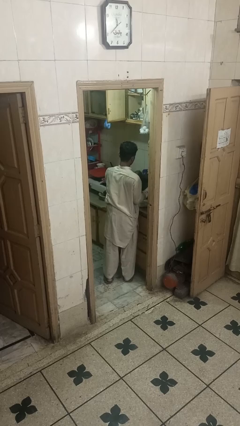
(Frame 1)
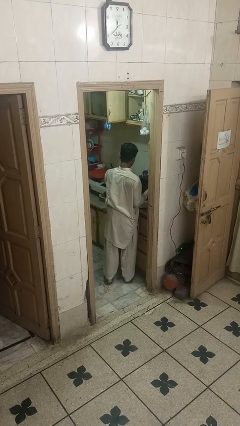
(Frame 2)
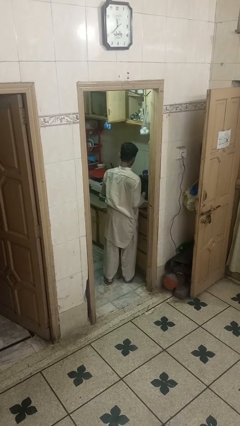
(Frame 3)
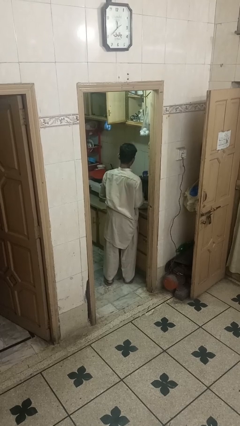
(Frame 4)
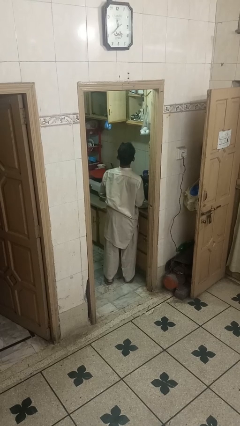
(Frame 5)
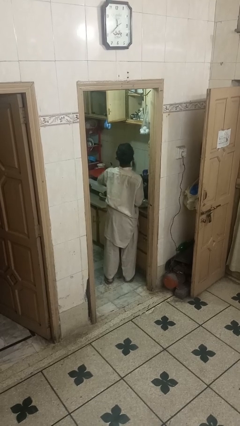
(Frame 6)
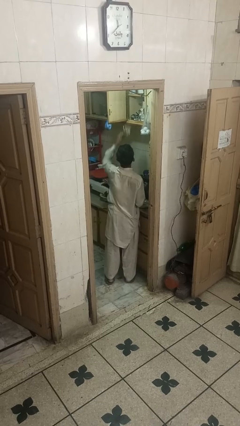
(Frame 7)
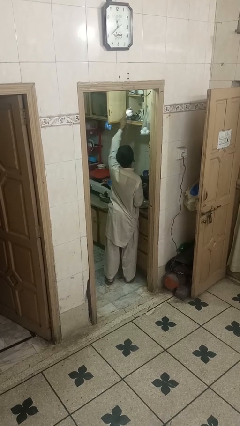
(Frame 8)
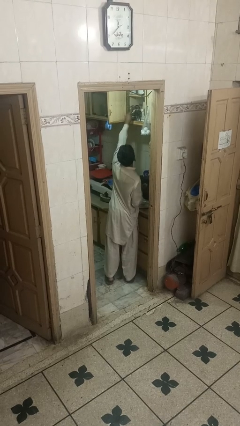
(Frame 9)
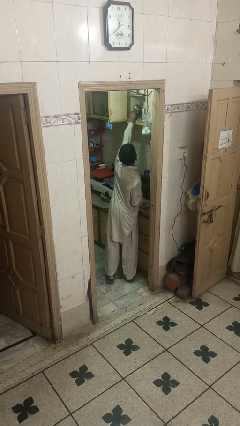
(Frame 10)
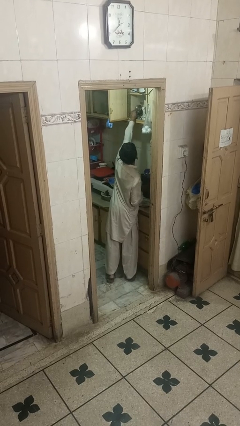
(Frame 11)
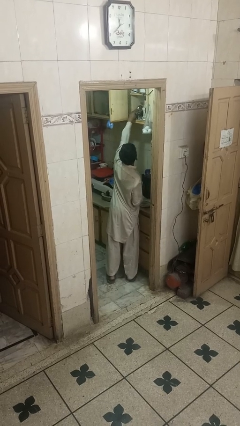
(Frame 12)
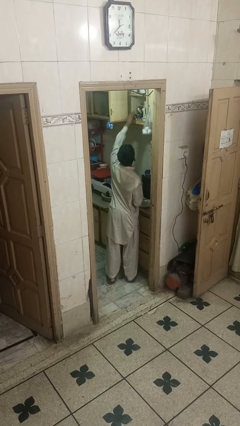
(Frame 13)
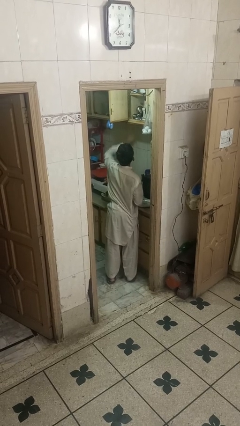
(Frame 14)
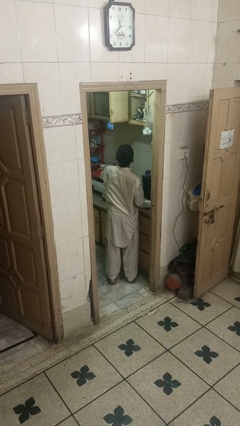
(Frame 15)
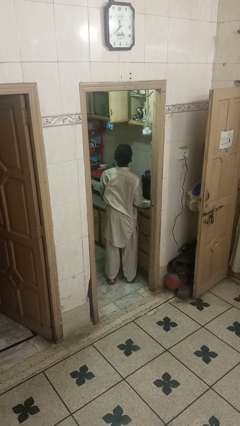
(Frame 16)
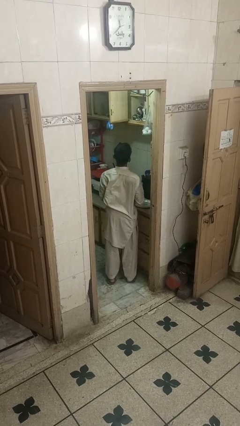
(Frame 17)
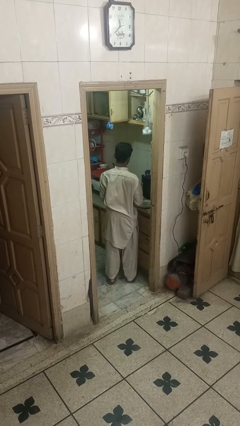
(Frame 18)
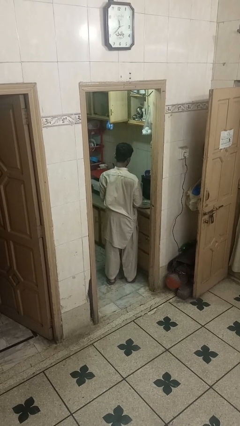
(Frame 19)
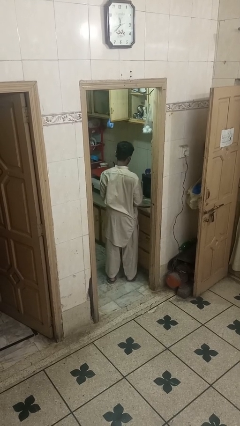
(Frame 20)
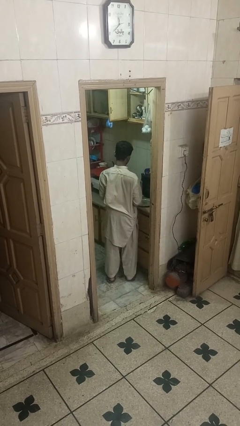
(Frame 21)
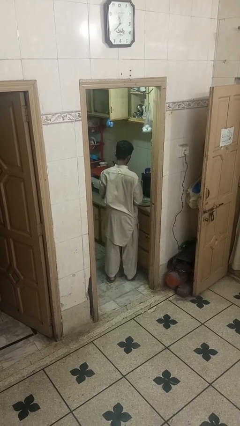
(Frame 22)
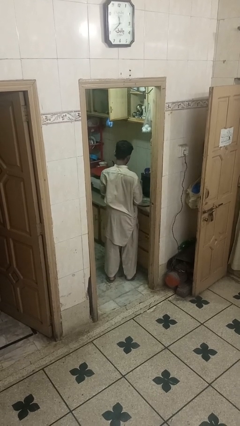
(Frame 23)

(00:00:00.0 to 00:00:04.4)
person puts object in cabinet

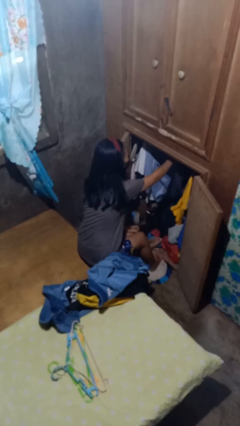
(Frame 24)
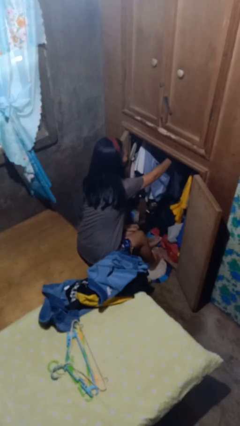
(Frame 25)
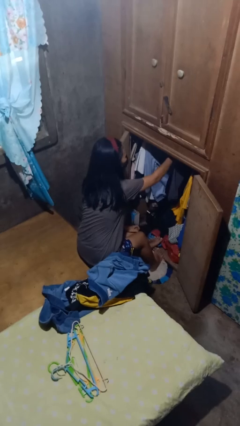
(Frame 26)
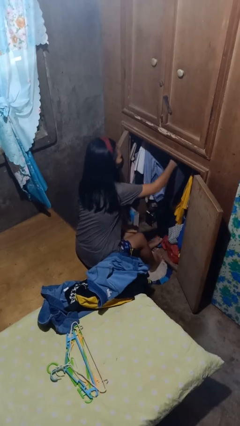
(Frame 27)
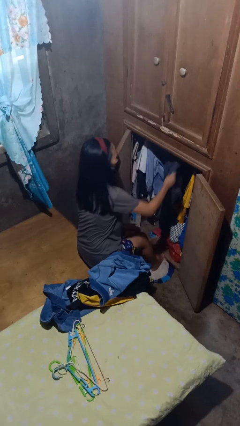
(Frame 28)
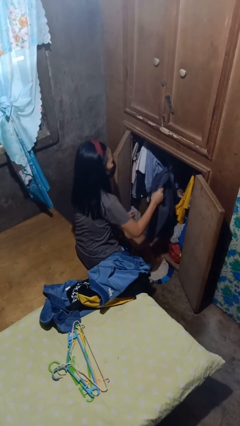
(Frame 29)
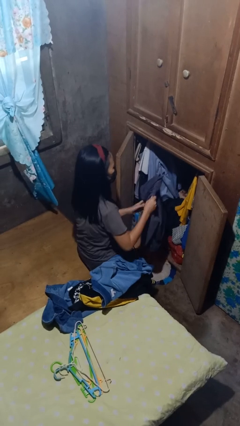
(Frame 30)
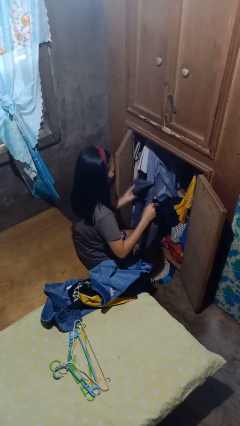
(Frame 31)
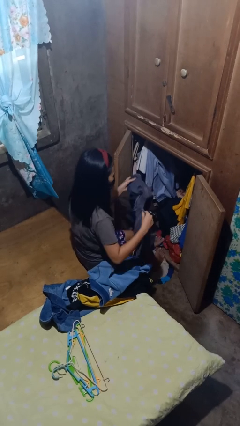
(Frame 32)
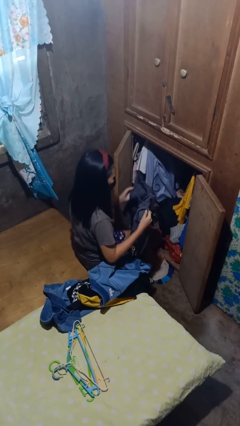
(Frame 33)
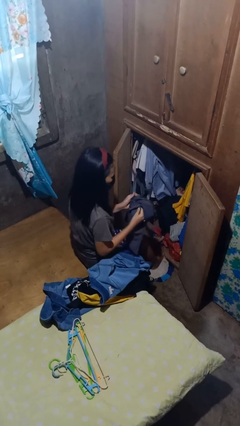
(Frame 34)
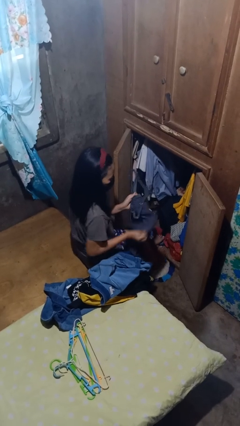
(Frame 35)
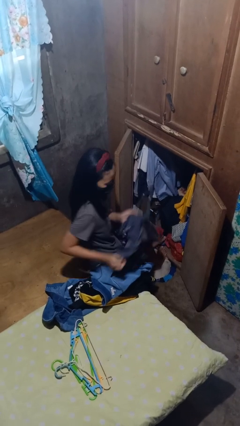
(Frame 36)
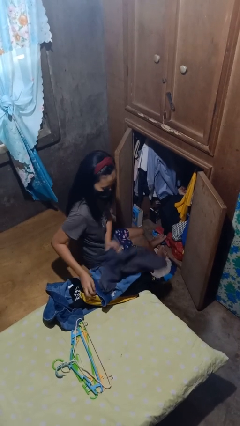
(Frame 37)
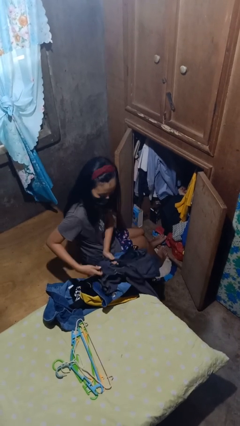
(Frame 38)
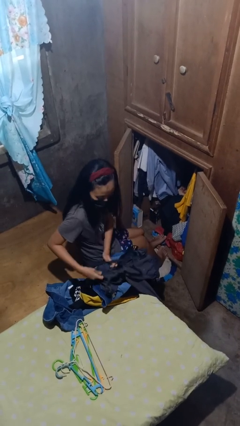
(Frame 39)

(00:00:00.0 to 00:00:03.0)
person takes clothes from closet

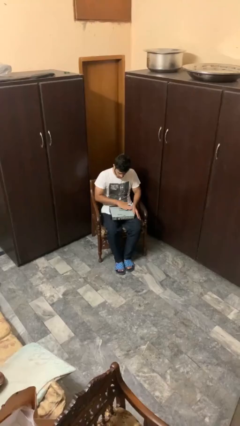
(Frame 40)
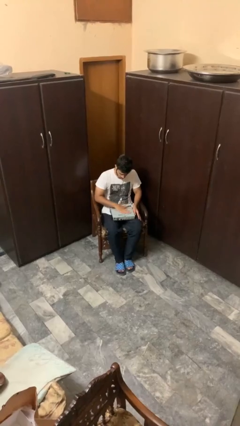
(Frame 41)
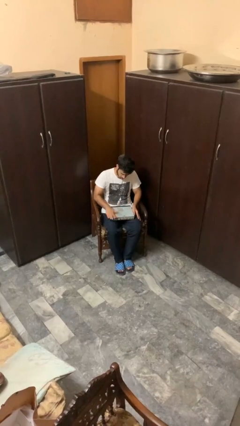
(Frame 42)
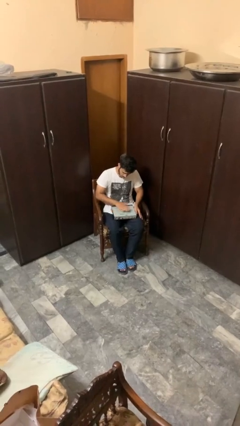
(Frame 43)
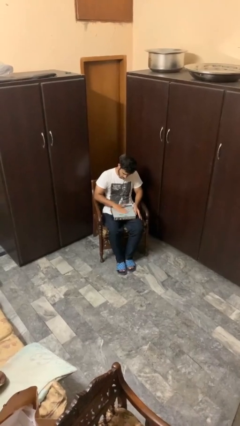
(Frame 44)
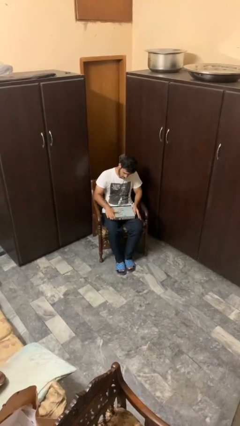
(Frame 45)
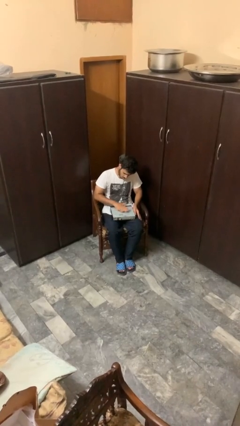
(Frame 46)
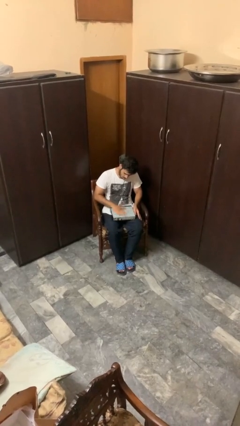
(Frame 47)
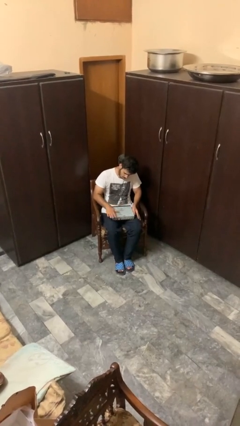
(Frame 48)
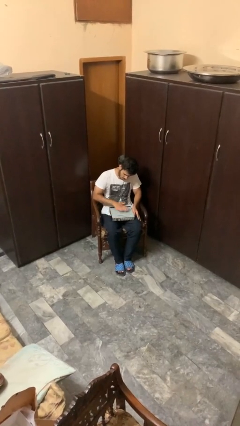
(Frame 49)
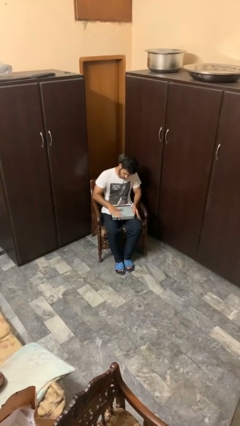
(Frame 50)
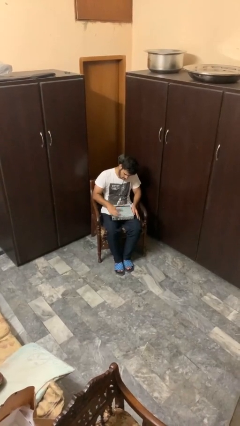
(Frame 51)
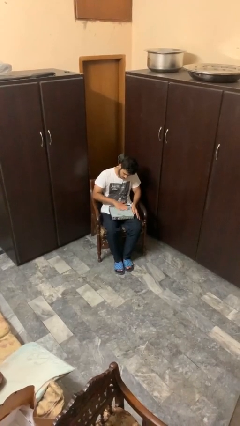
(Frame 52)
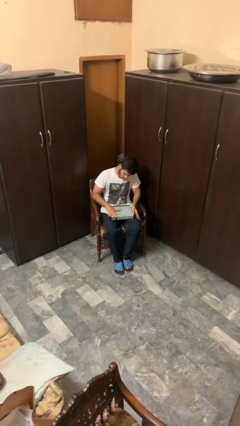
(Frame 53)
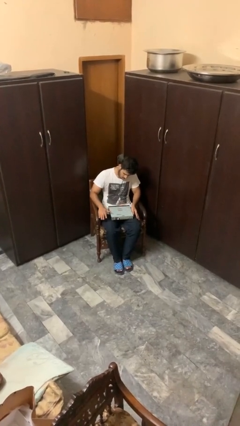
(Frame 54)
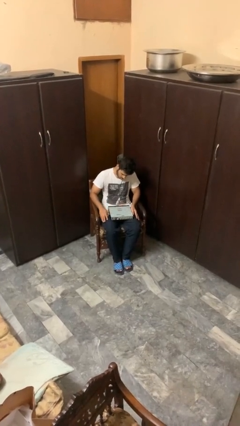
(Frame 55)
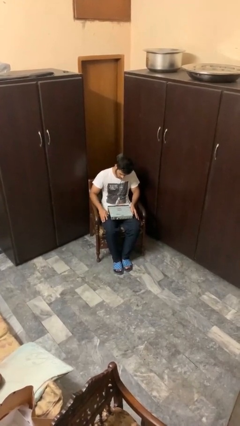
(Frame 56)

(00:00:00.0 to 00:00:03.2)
person waves hand over object

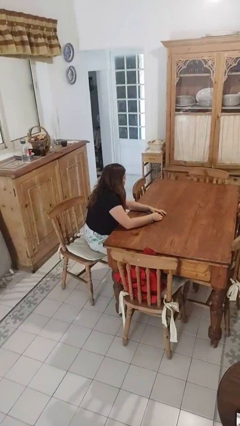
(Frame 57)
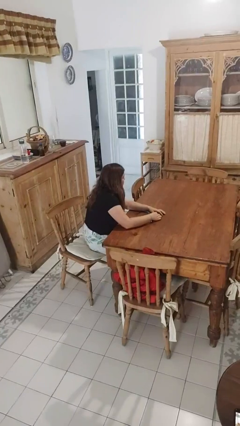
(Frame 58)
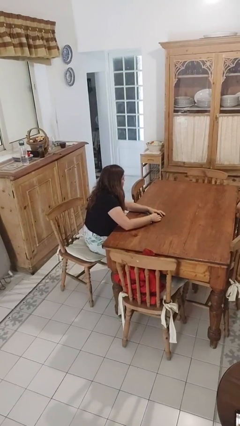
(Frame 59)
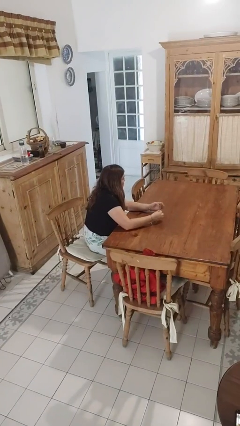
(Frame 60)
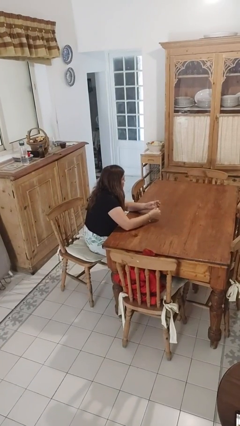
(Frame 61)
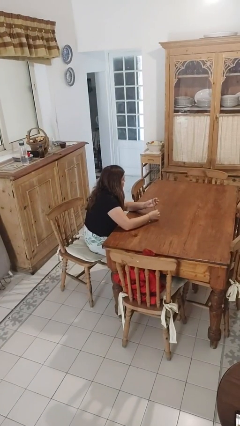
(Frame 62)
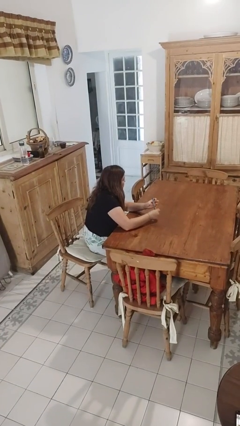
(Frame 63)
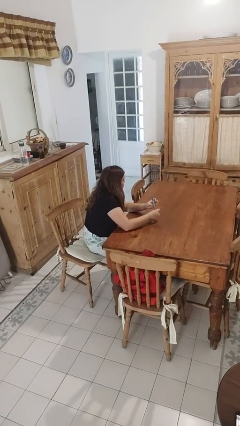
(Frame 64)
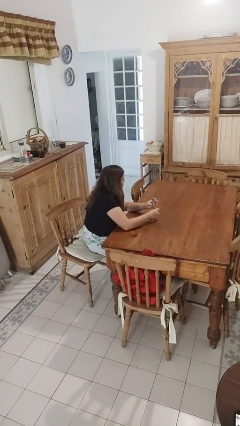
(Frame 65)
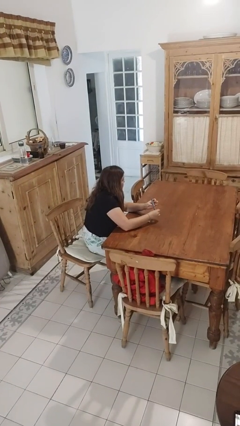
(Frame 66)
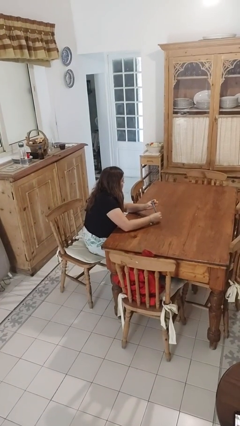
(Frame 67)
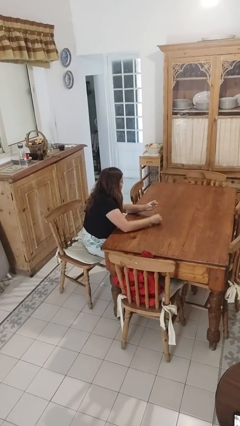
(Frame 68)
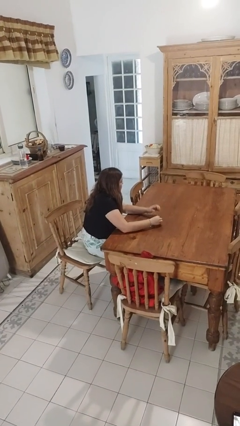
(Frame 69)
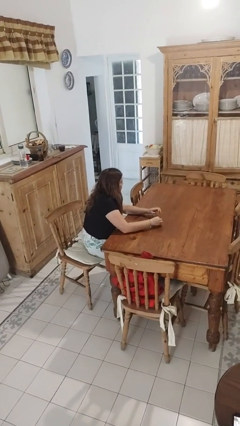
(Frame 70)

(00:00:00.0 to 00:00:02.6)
person files fingernails

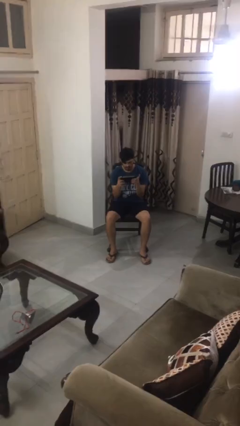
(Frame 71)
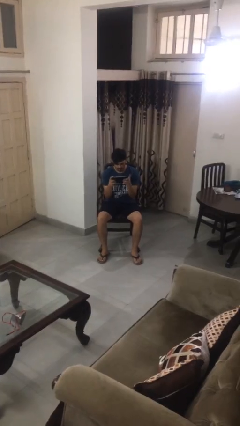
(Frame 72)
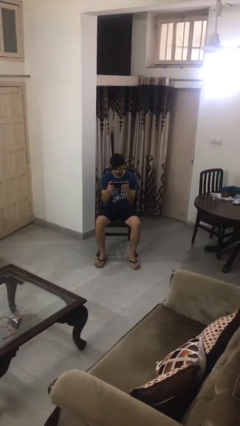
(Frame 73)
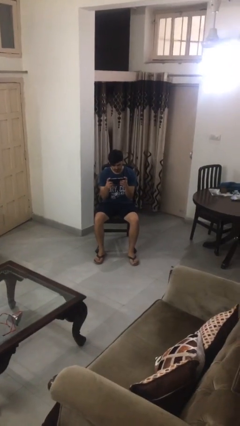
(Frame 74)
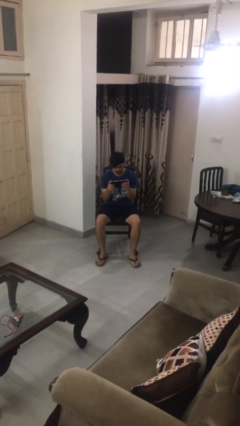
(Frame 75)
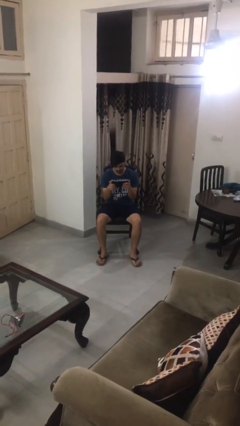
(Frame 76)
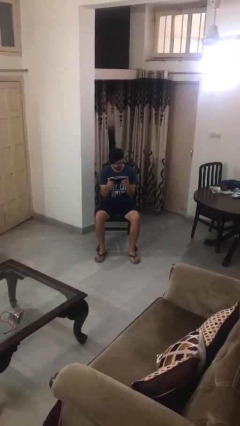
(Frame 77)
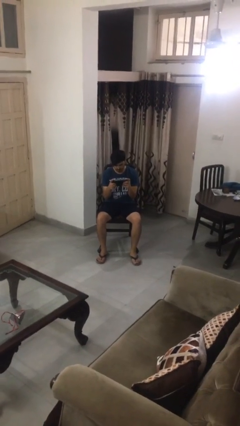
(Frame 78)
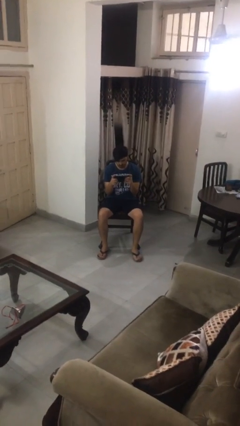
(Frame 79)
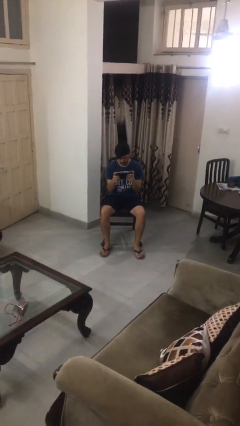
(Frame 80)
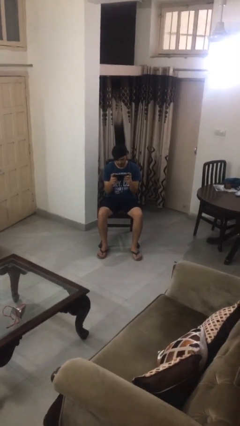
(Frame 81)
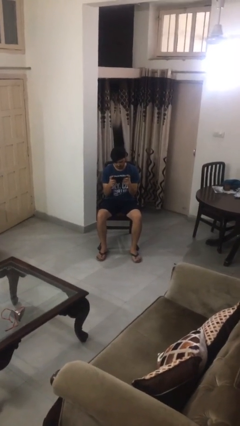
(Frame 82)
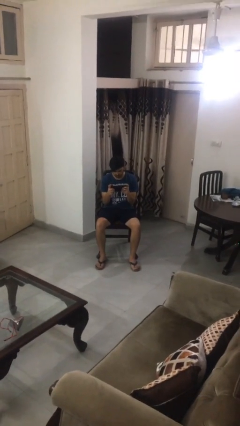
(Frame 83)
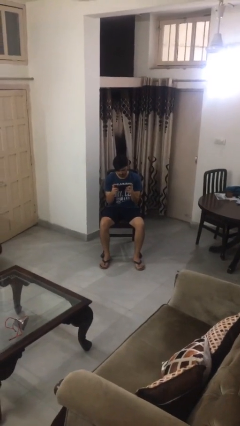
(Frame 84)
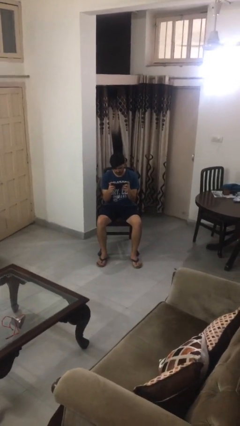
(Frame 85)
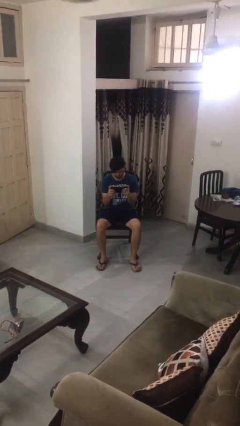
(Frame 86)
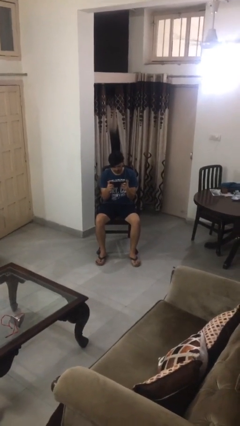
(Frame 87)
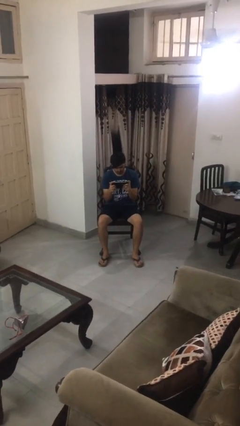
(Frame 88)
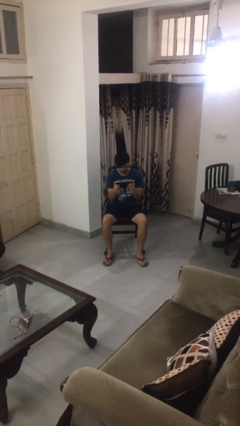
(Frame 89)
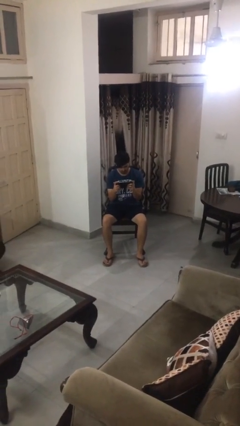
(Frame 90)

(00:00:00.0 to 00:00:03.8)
person interacts with handheld game

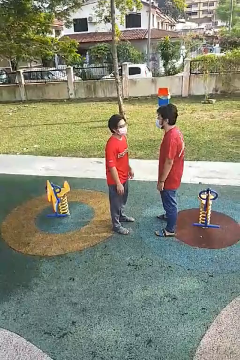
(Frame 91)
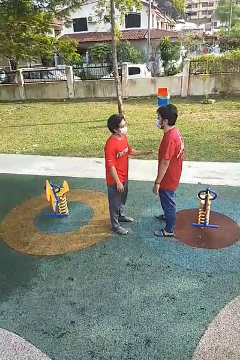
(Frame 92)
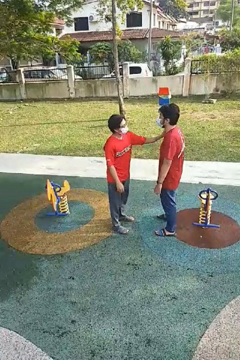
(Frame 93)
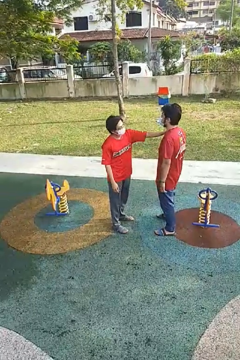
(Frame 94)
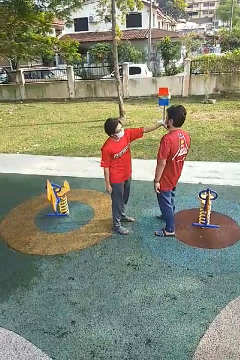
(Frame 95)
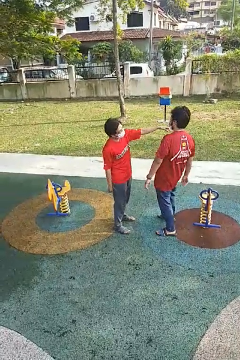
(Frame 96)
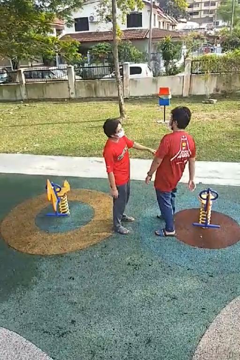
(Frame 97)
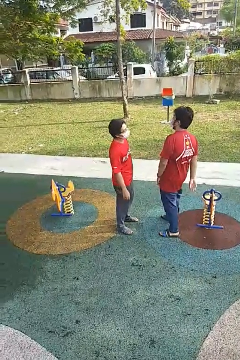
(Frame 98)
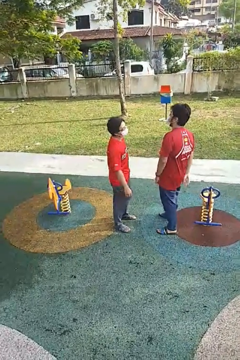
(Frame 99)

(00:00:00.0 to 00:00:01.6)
person shoves person
